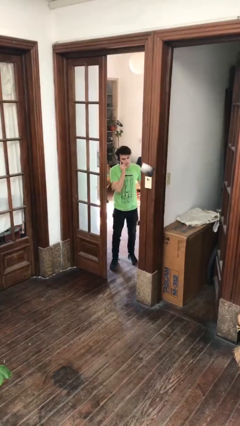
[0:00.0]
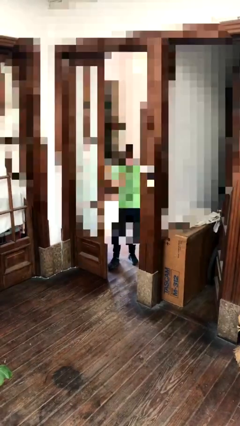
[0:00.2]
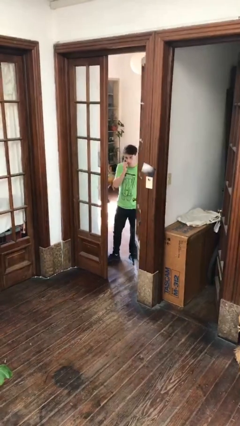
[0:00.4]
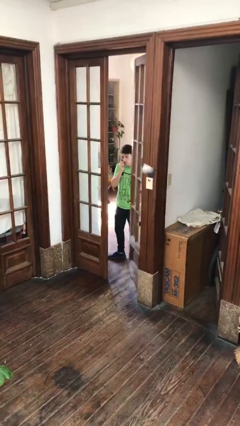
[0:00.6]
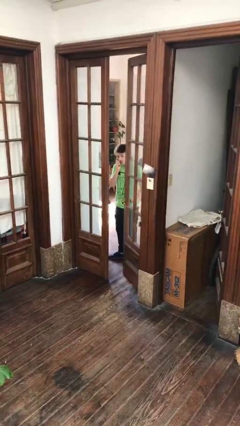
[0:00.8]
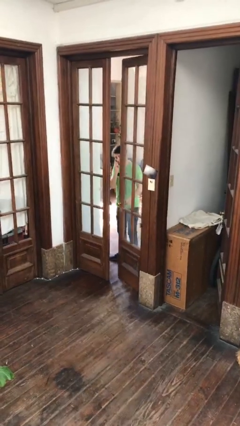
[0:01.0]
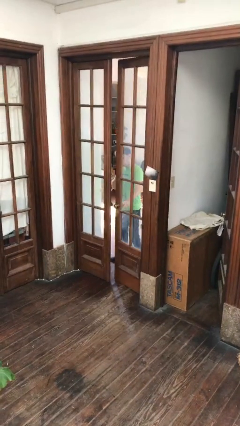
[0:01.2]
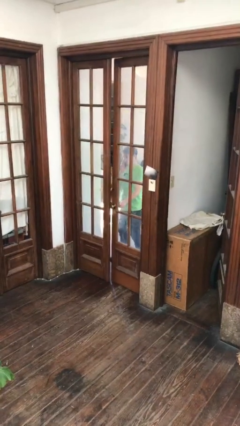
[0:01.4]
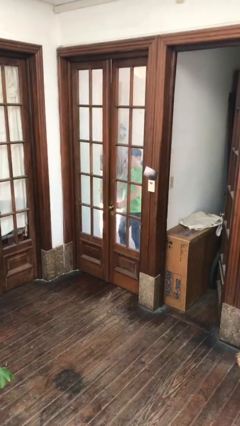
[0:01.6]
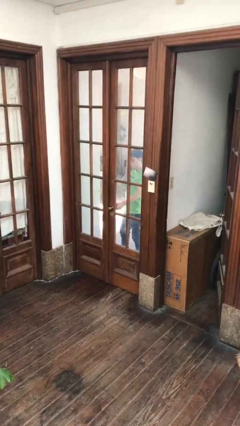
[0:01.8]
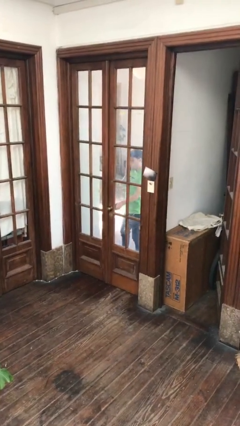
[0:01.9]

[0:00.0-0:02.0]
person closes facility door

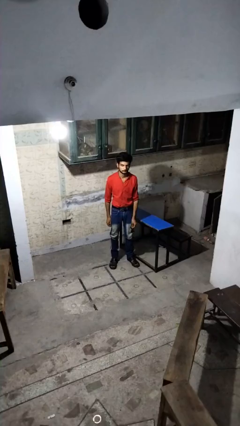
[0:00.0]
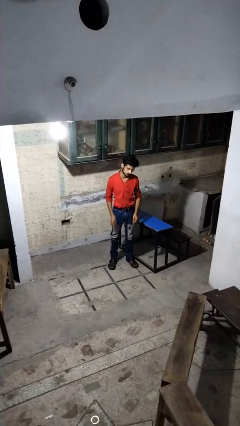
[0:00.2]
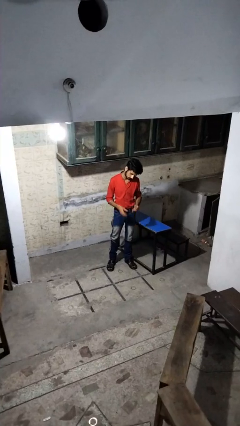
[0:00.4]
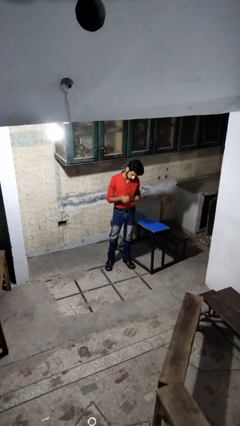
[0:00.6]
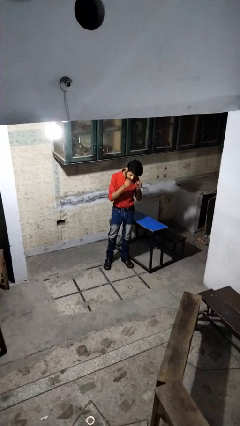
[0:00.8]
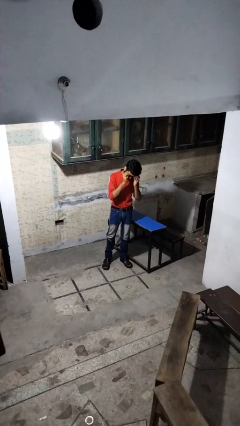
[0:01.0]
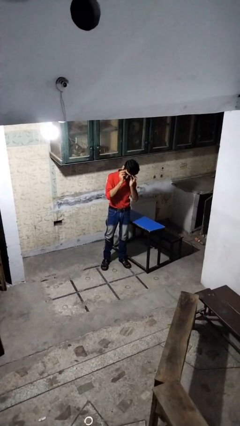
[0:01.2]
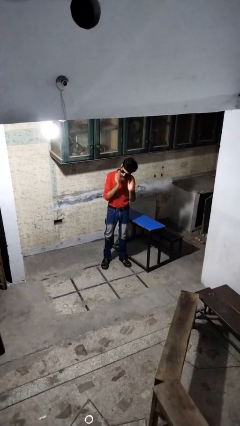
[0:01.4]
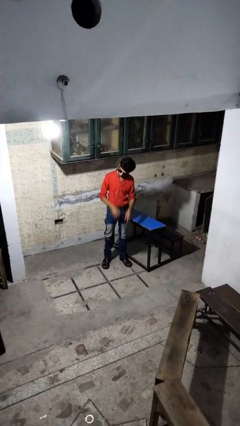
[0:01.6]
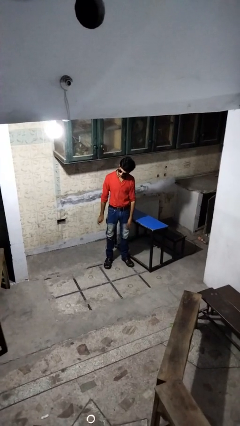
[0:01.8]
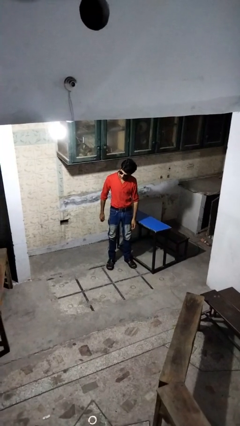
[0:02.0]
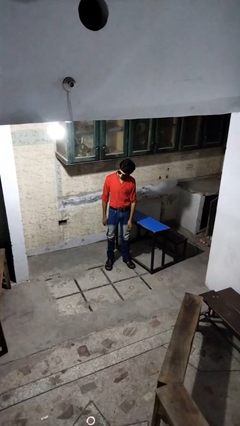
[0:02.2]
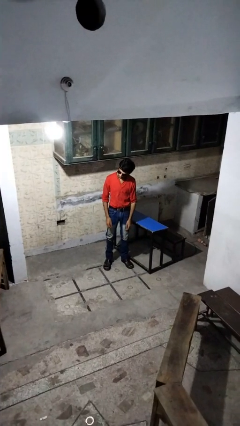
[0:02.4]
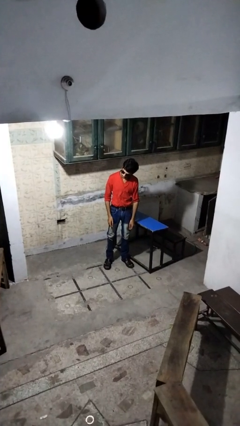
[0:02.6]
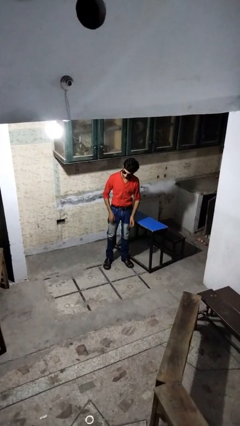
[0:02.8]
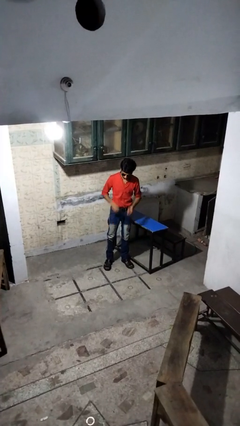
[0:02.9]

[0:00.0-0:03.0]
person puts on sunglasses

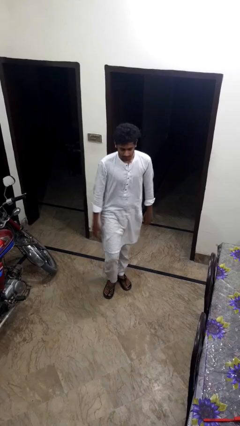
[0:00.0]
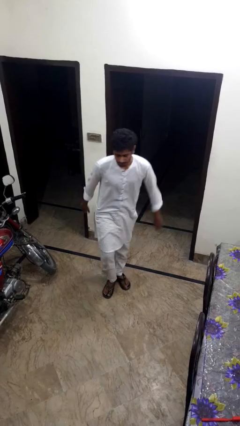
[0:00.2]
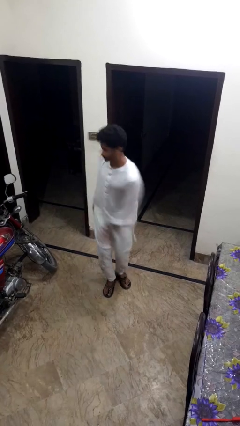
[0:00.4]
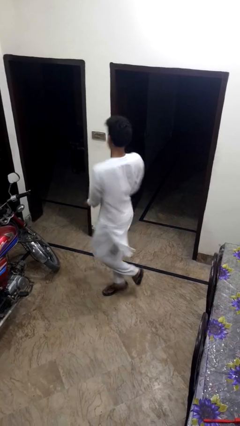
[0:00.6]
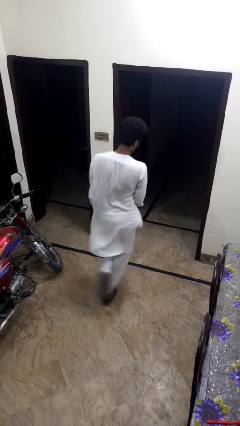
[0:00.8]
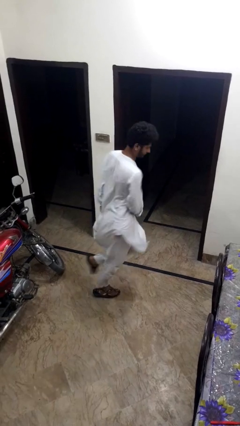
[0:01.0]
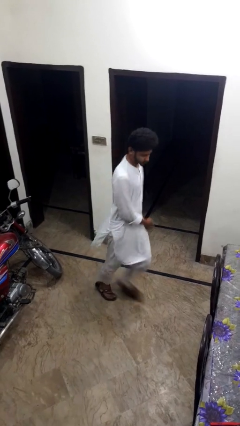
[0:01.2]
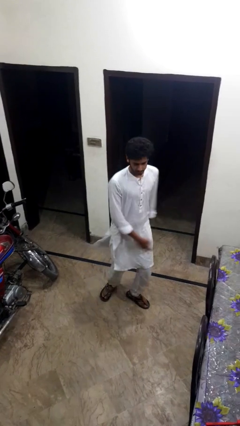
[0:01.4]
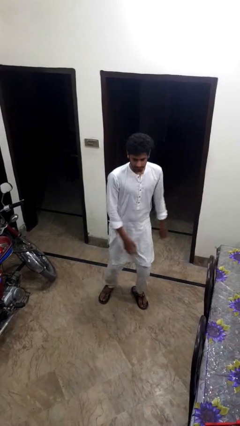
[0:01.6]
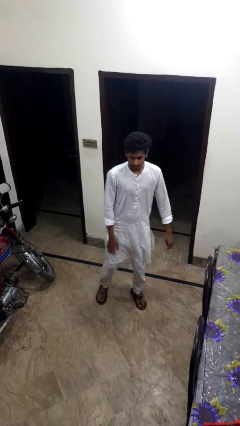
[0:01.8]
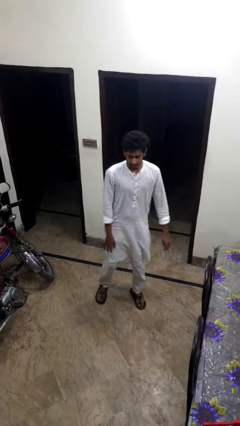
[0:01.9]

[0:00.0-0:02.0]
person twirls

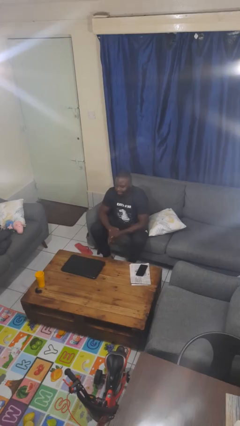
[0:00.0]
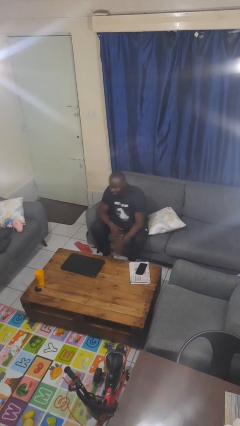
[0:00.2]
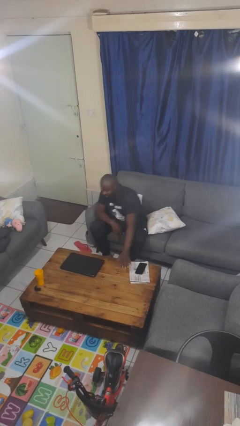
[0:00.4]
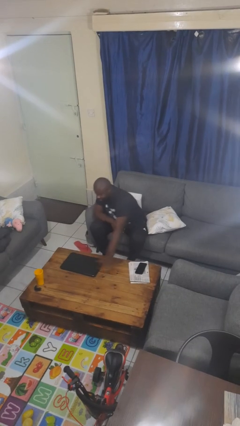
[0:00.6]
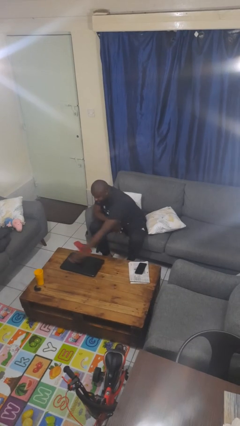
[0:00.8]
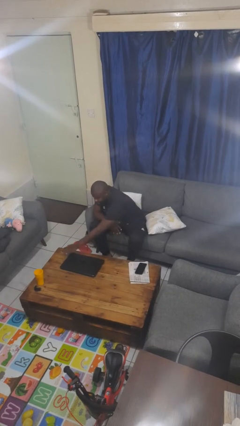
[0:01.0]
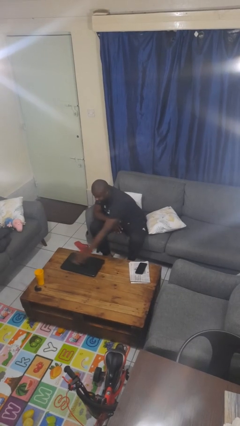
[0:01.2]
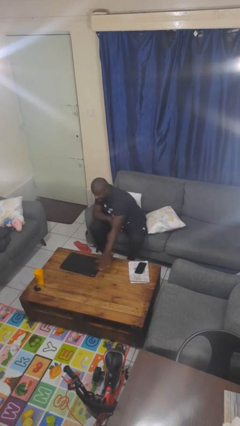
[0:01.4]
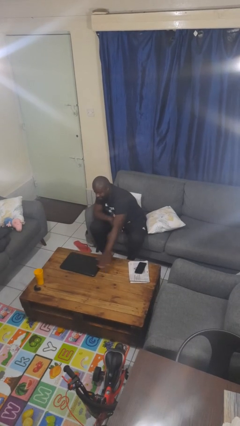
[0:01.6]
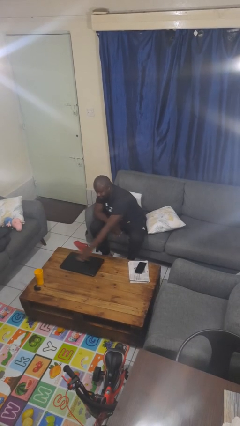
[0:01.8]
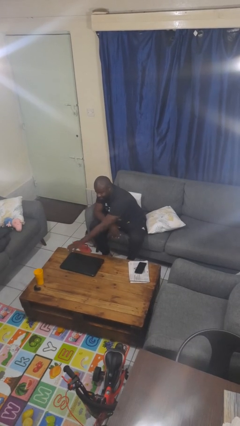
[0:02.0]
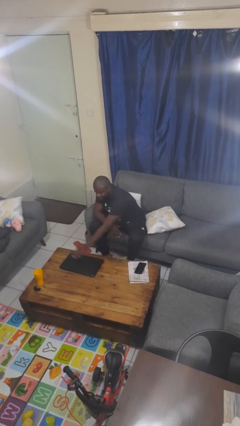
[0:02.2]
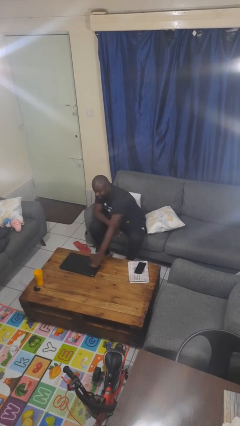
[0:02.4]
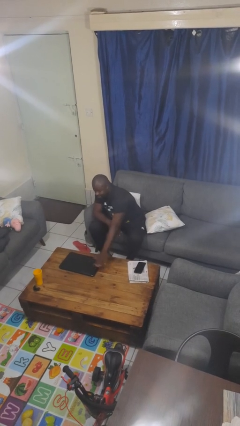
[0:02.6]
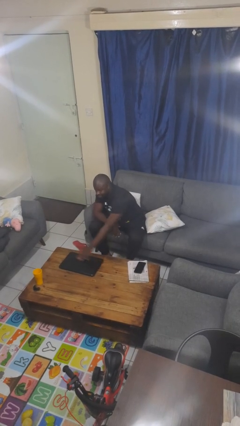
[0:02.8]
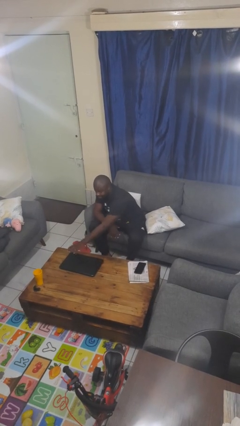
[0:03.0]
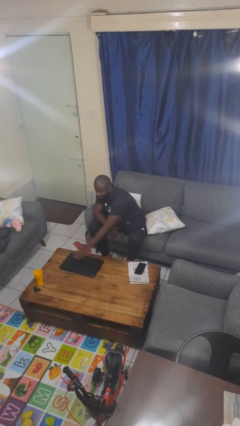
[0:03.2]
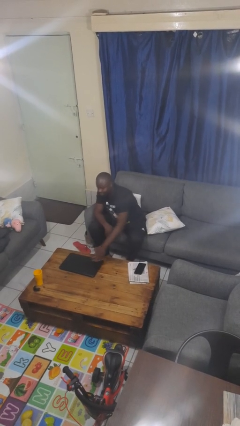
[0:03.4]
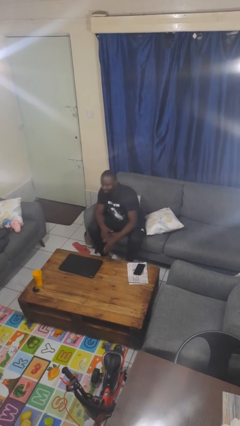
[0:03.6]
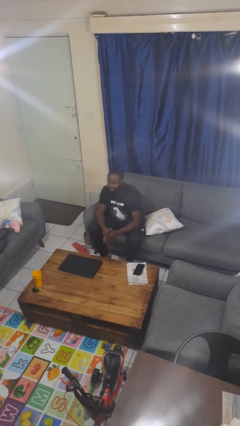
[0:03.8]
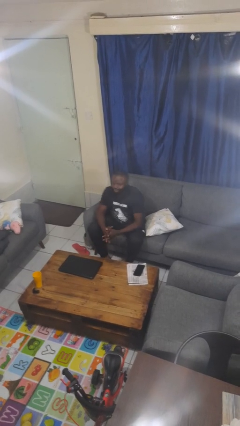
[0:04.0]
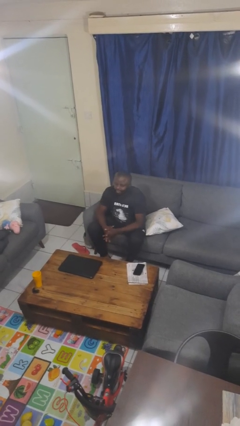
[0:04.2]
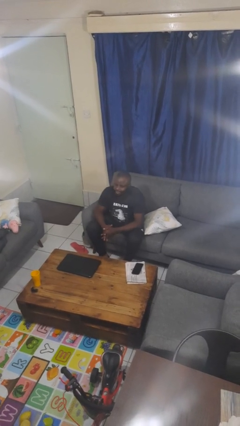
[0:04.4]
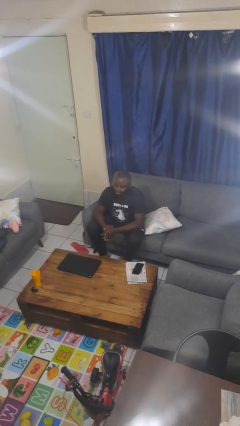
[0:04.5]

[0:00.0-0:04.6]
person waves hand over object

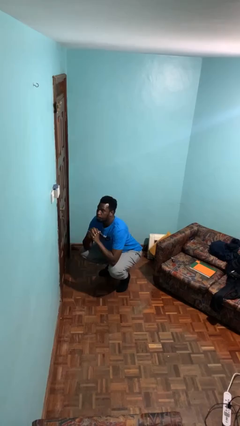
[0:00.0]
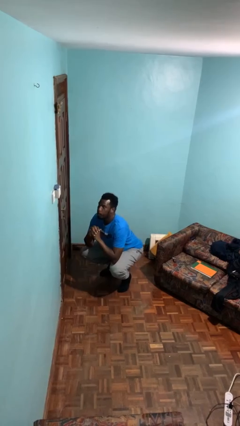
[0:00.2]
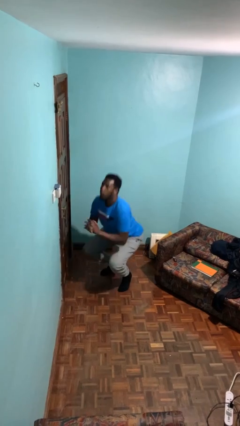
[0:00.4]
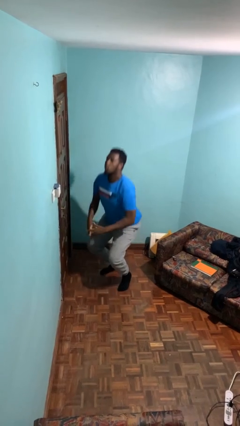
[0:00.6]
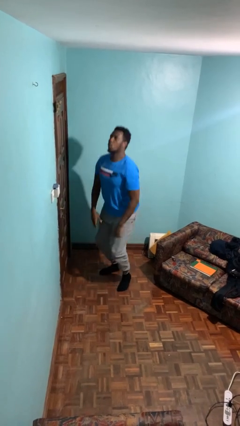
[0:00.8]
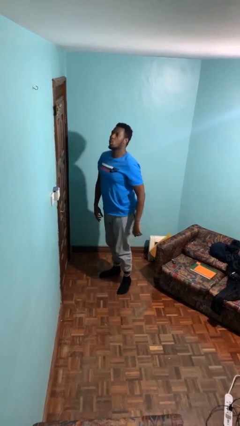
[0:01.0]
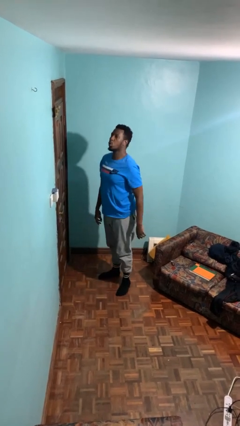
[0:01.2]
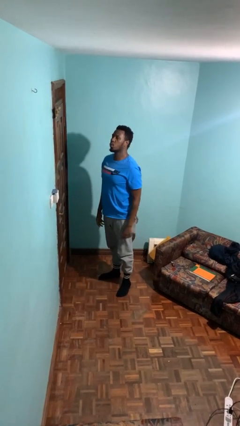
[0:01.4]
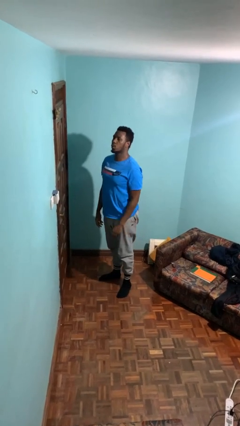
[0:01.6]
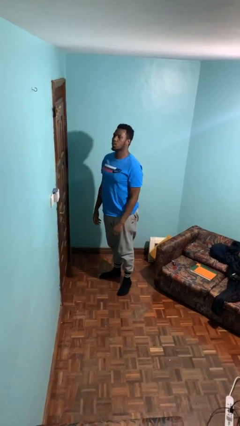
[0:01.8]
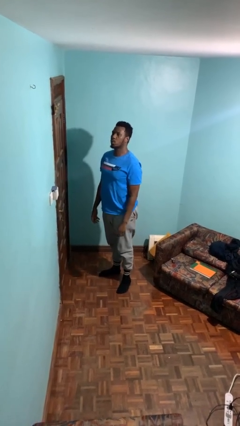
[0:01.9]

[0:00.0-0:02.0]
person stands up

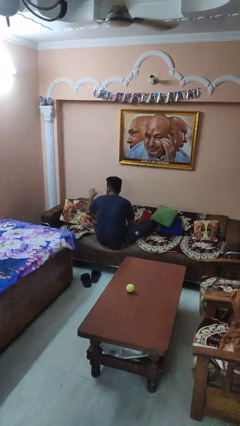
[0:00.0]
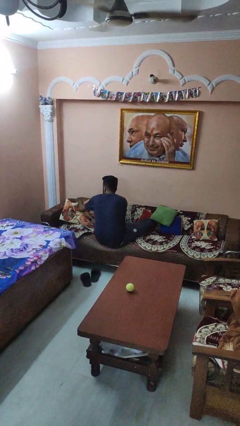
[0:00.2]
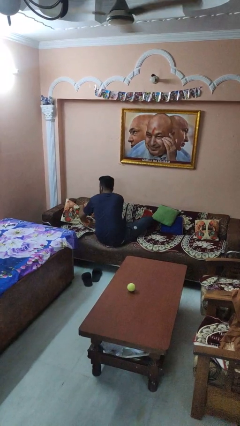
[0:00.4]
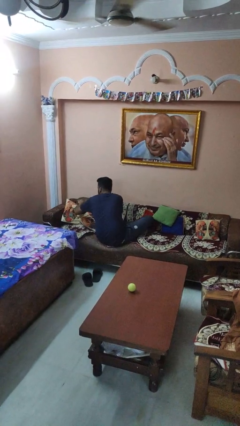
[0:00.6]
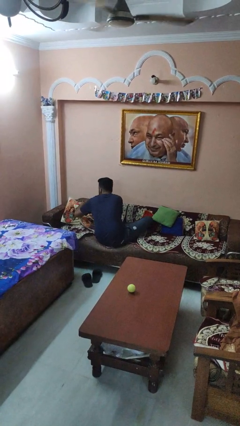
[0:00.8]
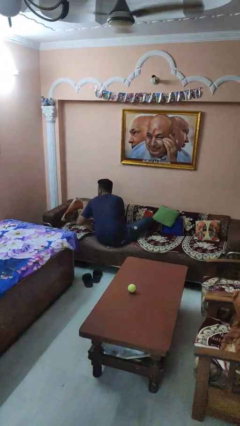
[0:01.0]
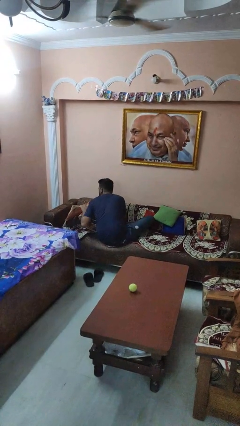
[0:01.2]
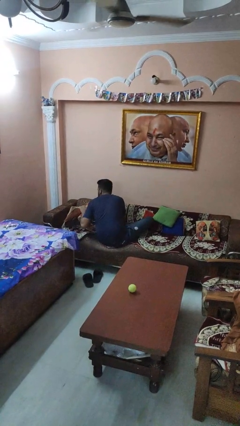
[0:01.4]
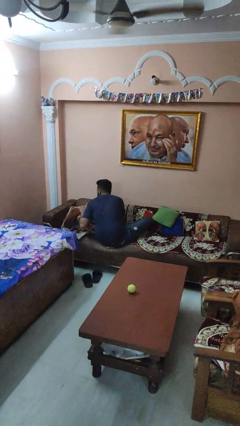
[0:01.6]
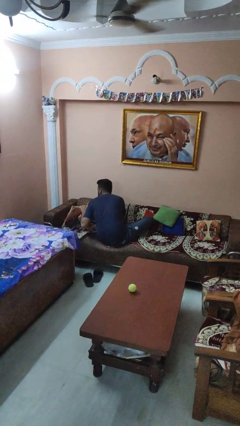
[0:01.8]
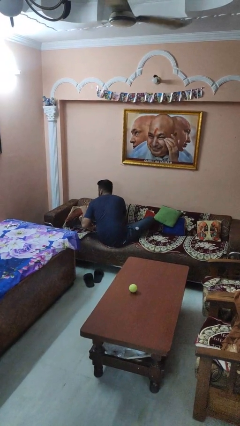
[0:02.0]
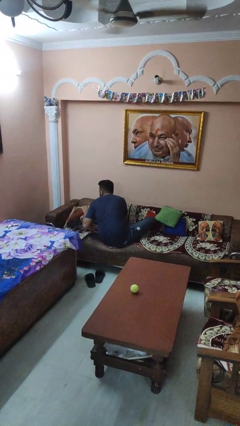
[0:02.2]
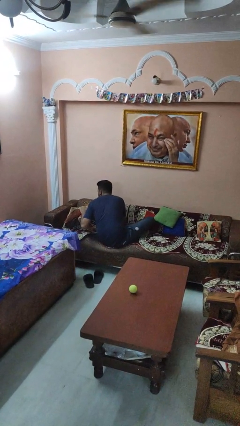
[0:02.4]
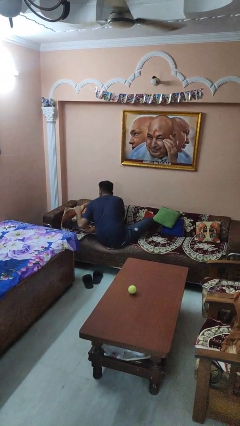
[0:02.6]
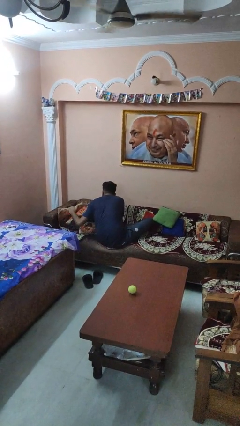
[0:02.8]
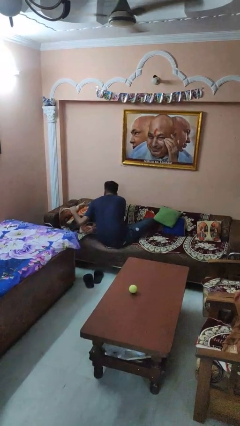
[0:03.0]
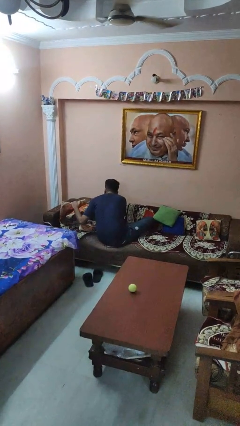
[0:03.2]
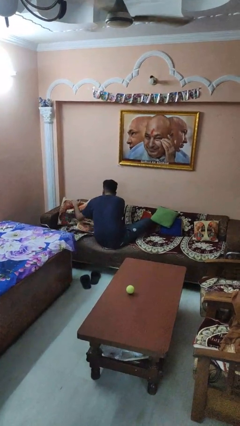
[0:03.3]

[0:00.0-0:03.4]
person searches in couch

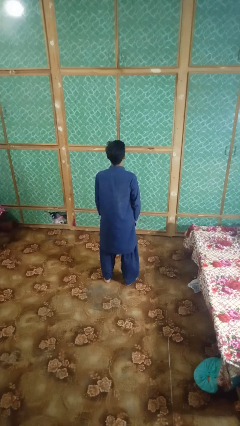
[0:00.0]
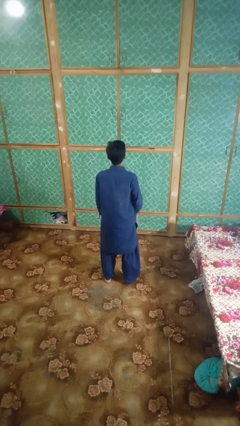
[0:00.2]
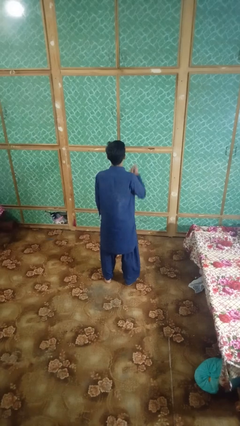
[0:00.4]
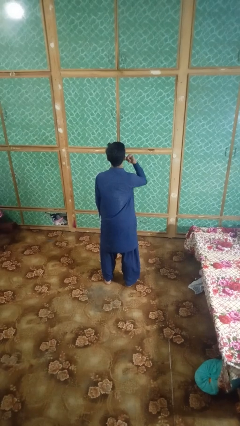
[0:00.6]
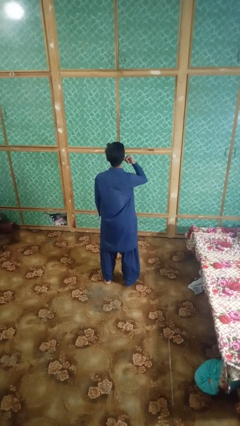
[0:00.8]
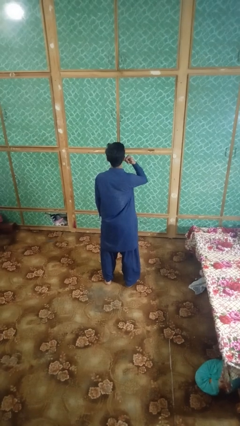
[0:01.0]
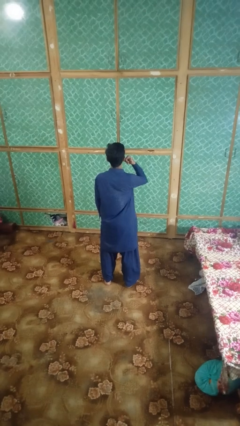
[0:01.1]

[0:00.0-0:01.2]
person gestures call me
